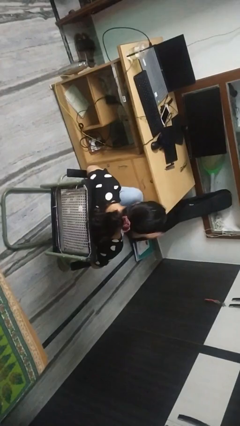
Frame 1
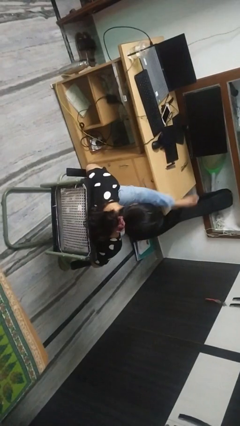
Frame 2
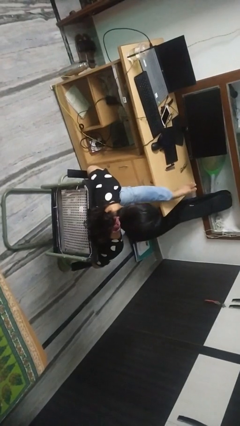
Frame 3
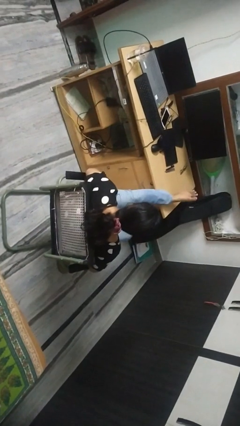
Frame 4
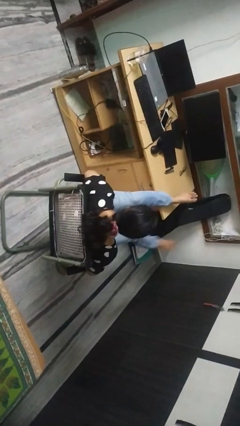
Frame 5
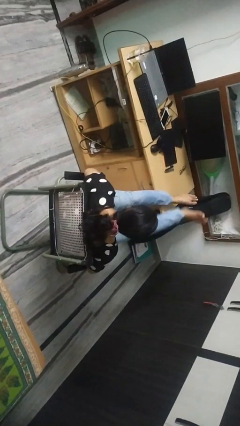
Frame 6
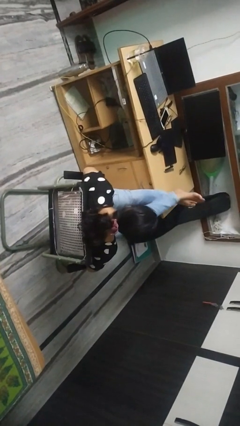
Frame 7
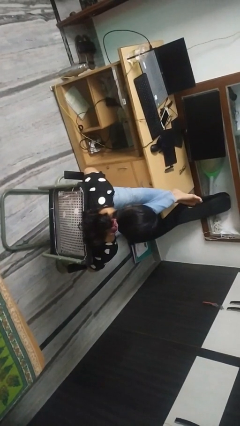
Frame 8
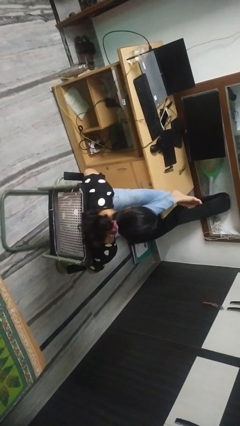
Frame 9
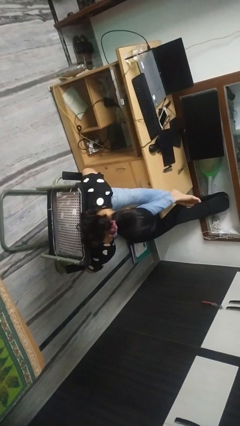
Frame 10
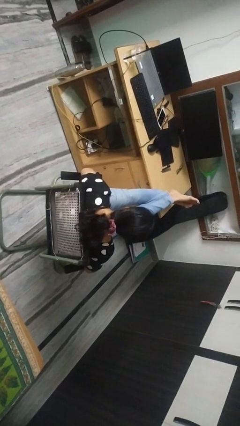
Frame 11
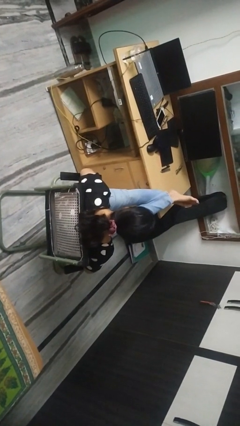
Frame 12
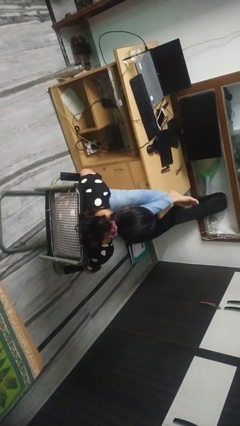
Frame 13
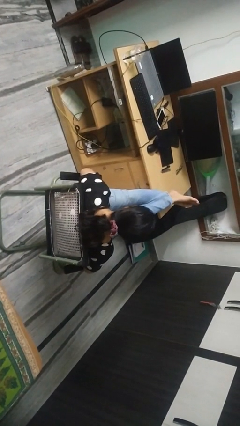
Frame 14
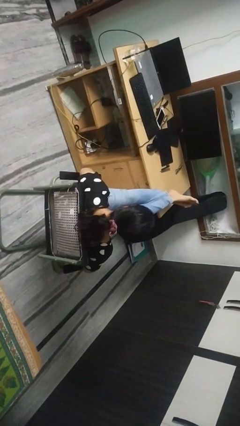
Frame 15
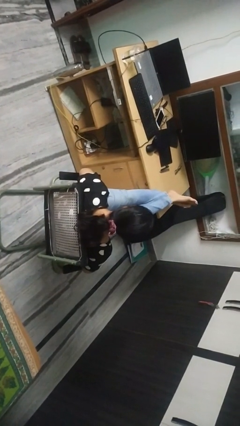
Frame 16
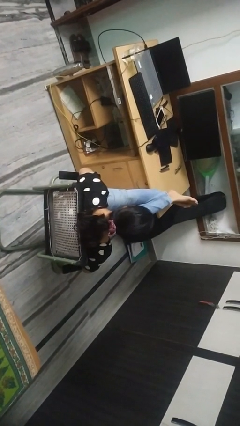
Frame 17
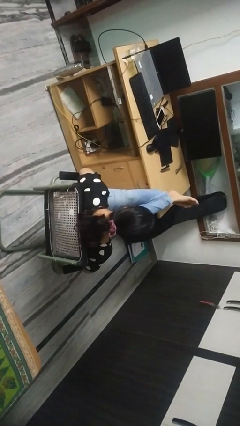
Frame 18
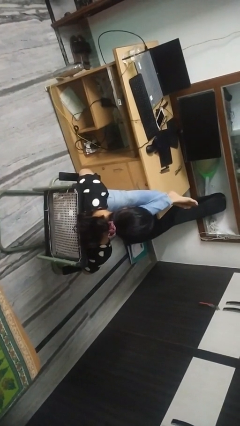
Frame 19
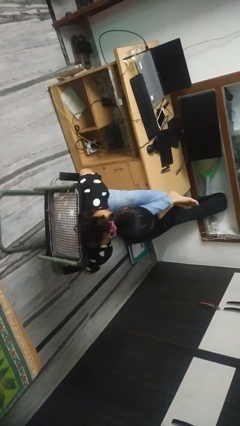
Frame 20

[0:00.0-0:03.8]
person puts feet up

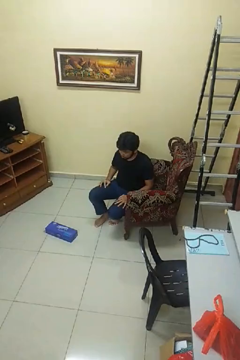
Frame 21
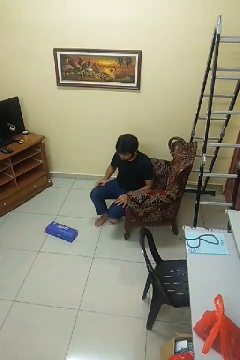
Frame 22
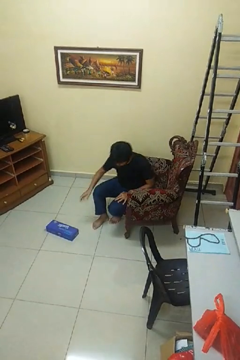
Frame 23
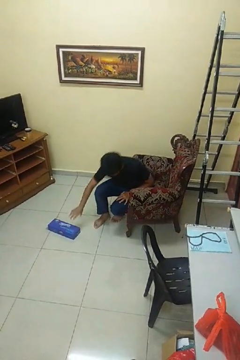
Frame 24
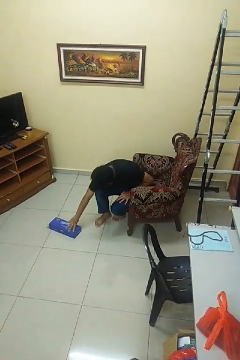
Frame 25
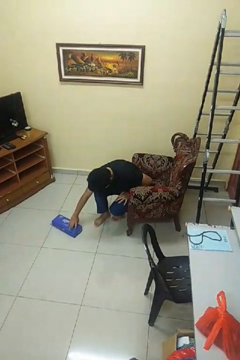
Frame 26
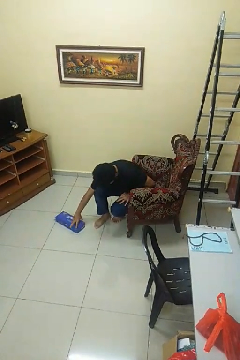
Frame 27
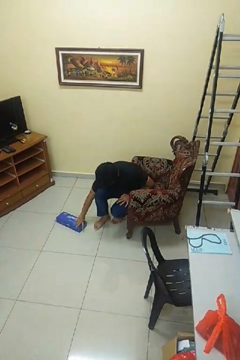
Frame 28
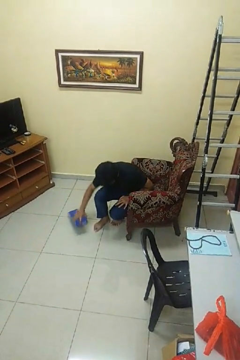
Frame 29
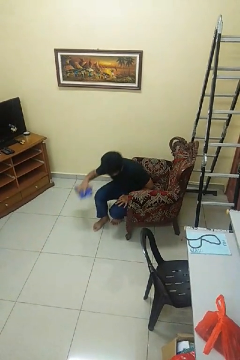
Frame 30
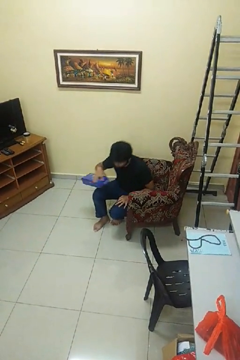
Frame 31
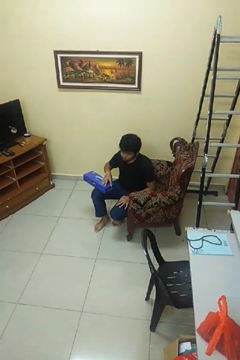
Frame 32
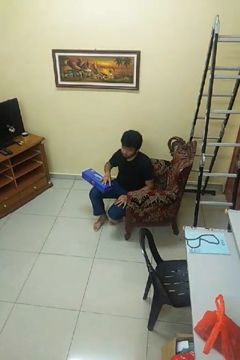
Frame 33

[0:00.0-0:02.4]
person picks up object from floor

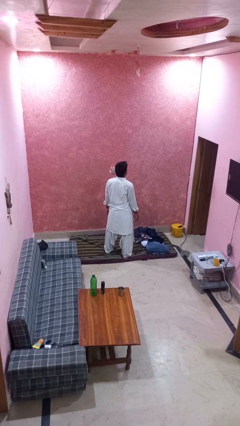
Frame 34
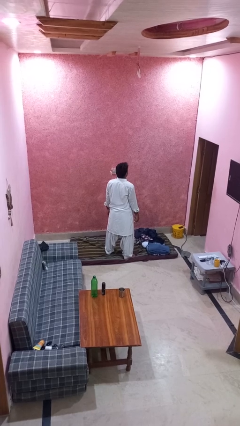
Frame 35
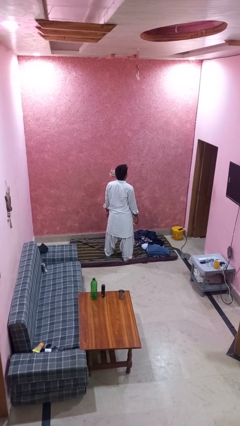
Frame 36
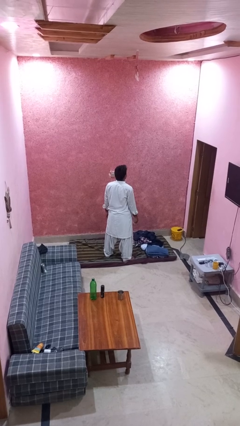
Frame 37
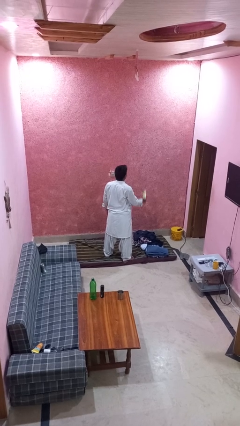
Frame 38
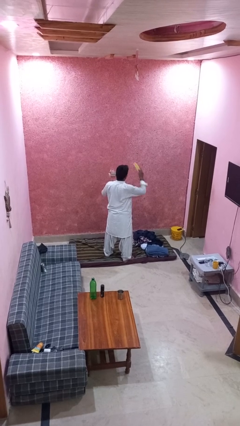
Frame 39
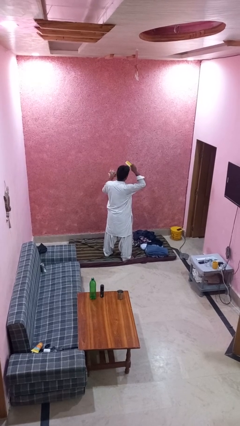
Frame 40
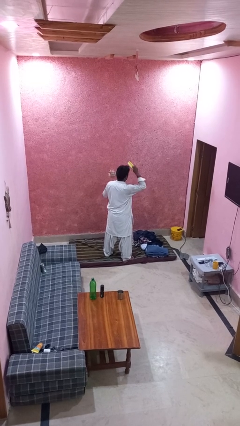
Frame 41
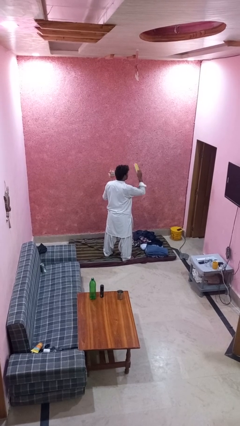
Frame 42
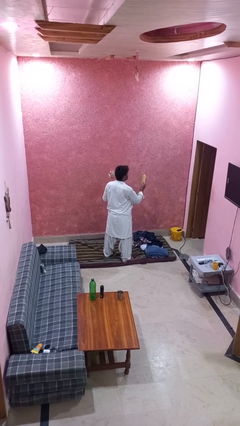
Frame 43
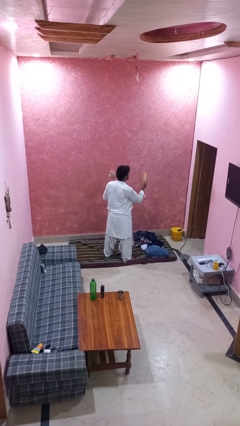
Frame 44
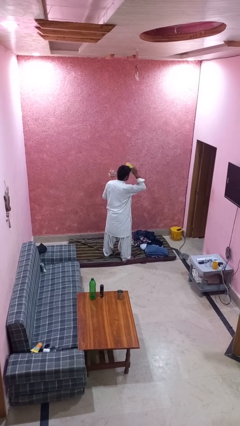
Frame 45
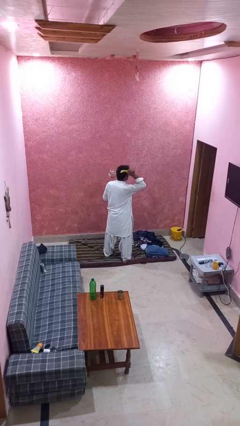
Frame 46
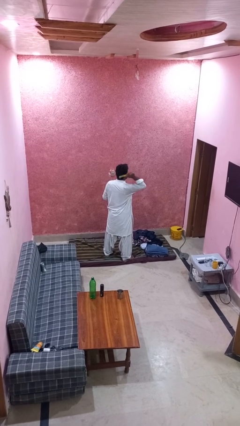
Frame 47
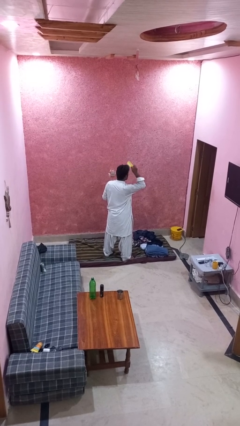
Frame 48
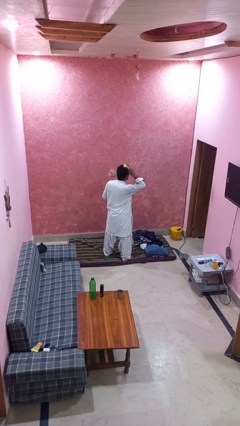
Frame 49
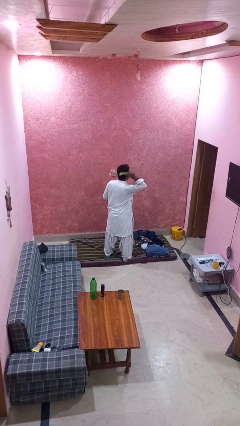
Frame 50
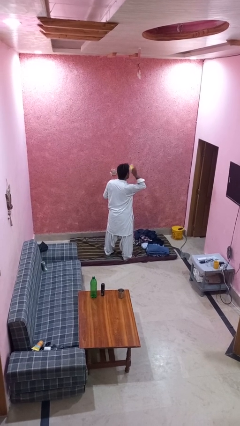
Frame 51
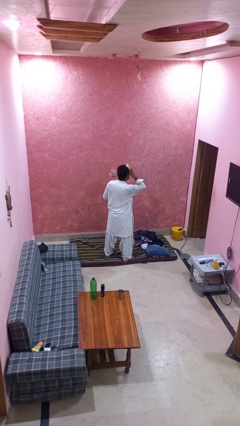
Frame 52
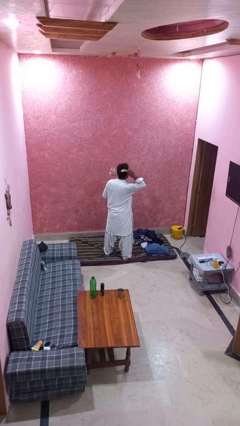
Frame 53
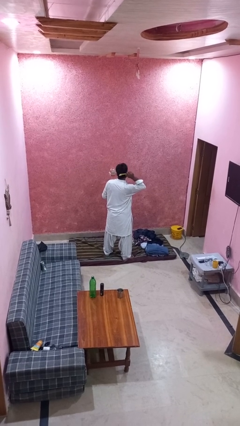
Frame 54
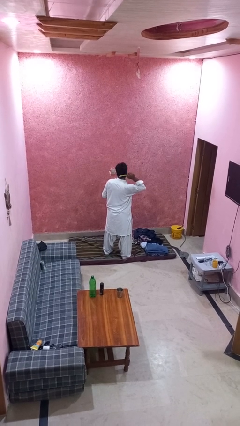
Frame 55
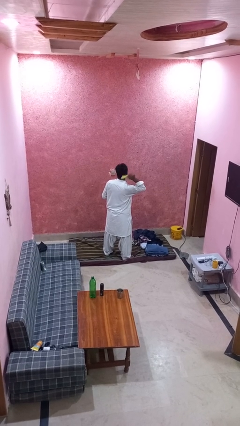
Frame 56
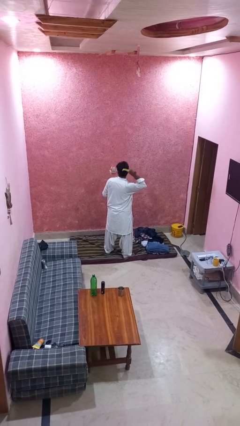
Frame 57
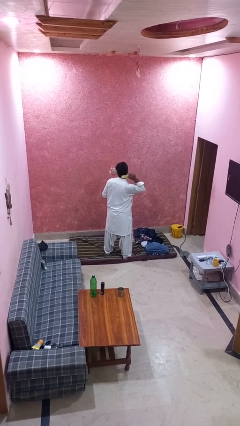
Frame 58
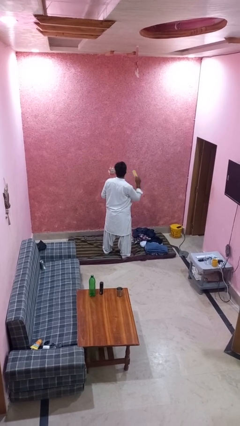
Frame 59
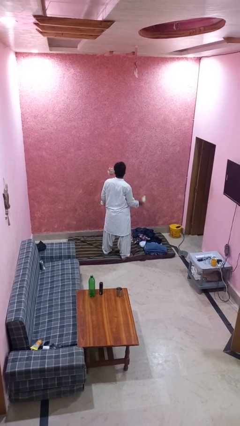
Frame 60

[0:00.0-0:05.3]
person brushes hair

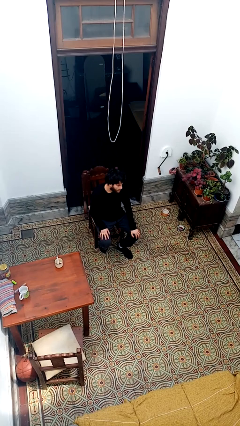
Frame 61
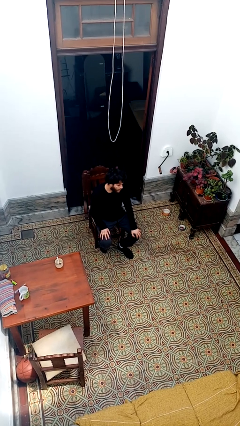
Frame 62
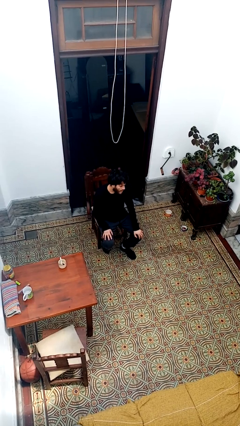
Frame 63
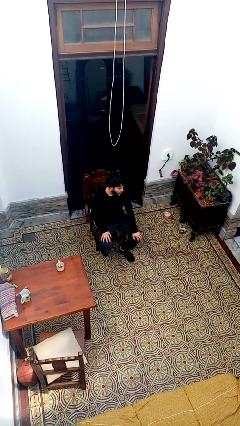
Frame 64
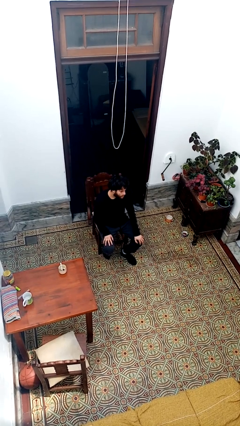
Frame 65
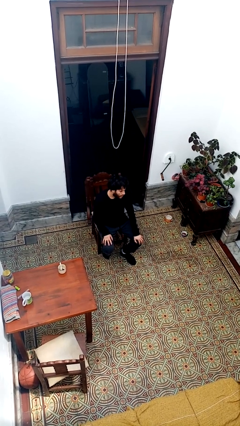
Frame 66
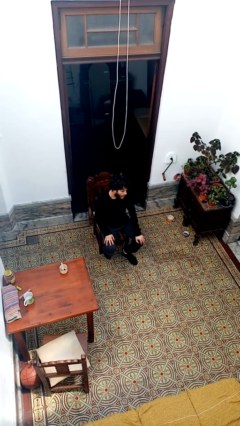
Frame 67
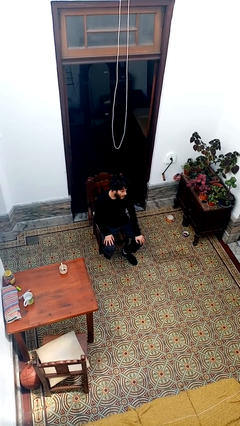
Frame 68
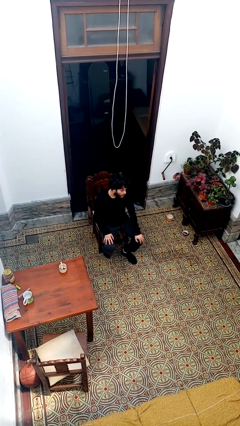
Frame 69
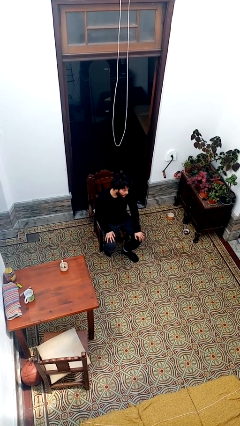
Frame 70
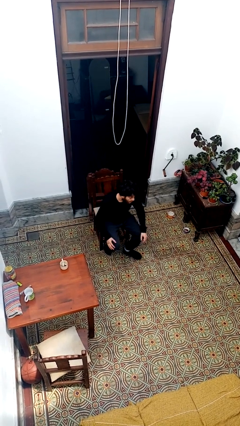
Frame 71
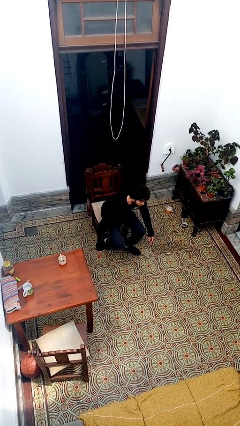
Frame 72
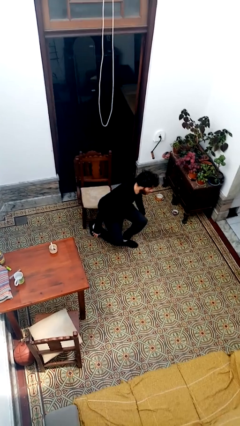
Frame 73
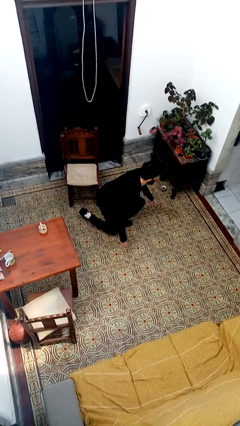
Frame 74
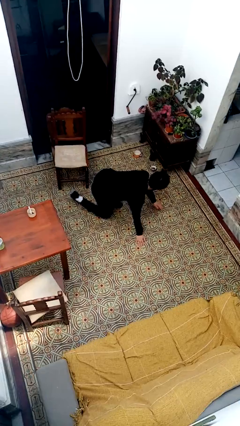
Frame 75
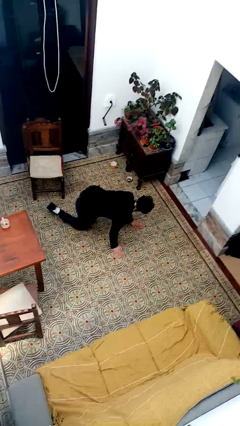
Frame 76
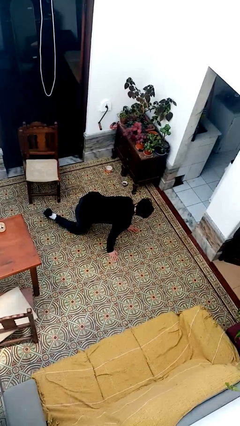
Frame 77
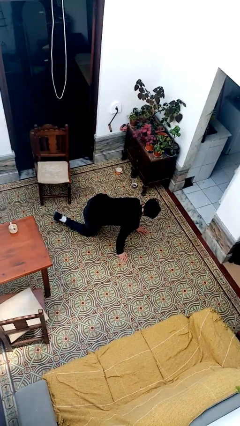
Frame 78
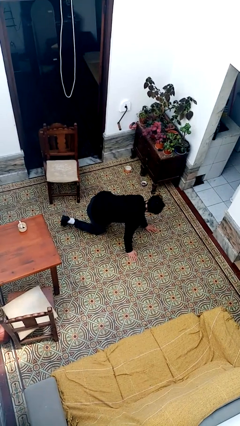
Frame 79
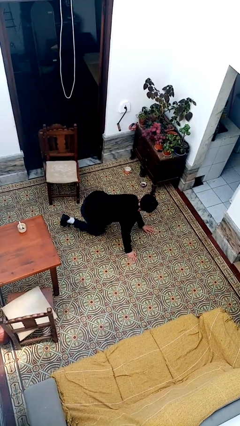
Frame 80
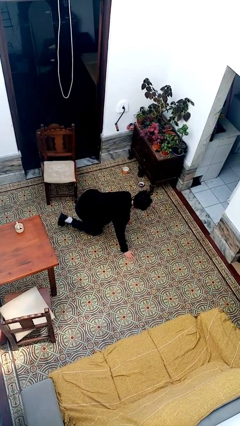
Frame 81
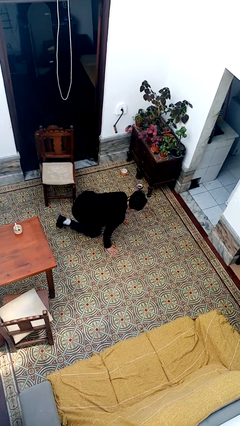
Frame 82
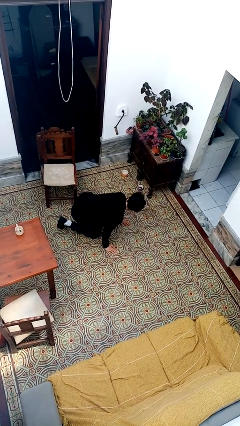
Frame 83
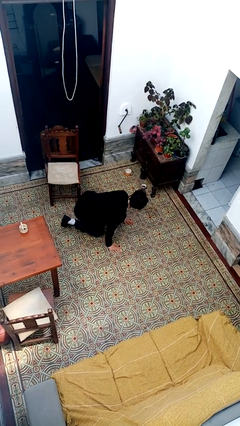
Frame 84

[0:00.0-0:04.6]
person falls from chair

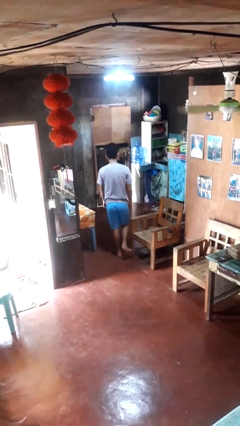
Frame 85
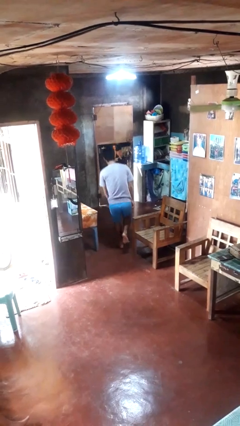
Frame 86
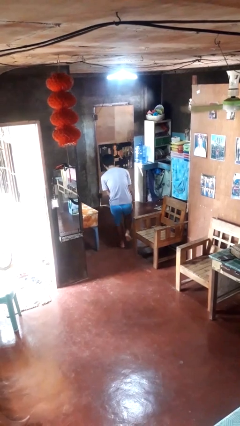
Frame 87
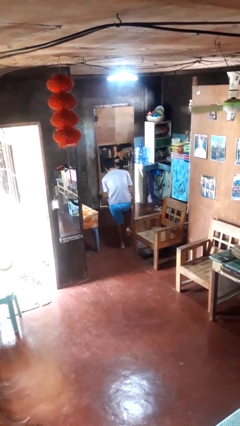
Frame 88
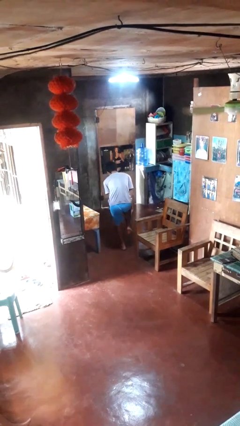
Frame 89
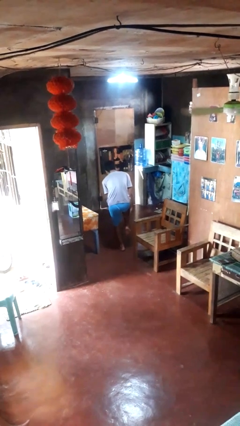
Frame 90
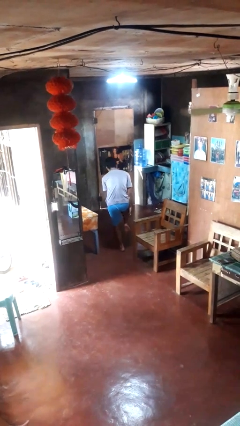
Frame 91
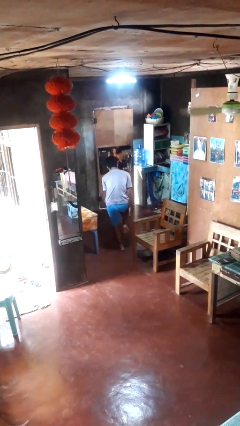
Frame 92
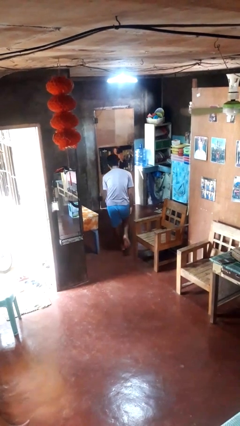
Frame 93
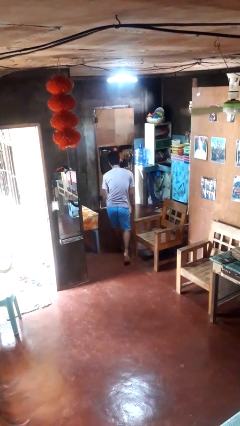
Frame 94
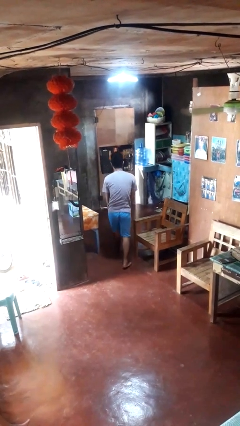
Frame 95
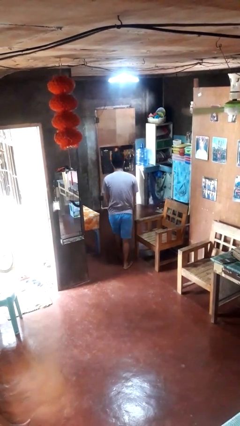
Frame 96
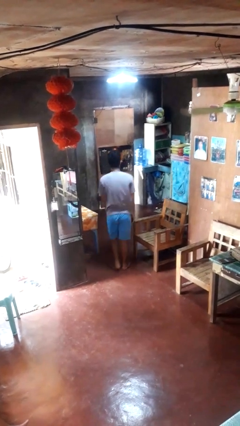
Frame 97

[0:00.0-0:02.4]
person stubs toe
